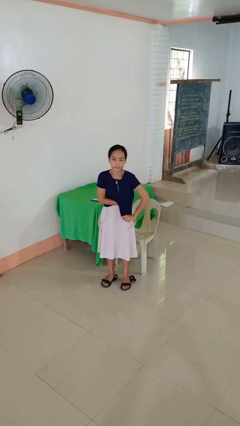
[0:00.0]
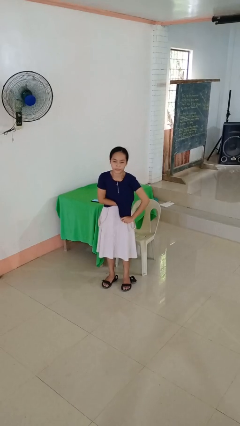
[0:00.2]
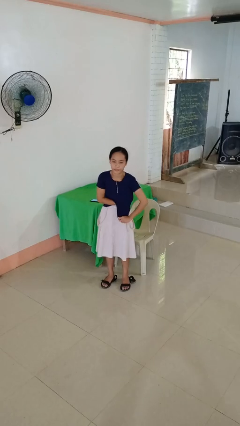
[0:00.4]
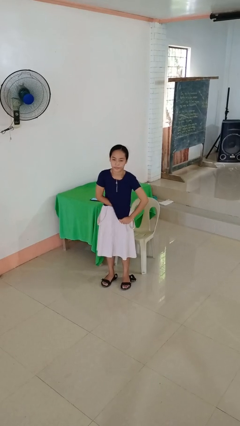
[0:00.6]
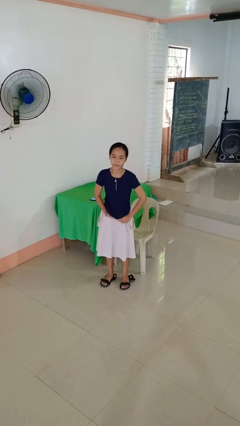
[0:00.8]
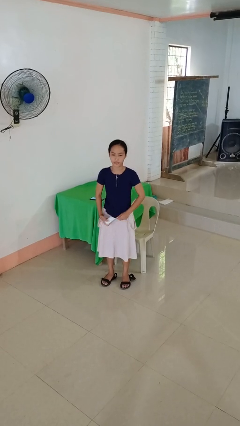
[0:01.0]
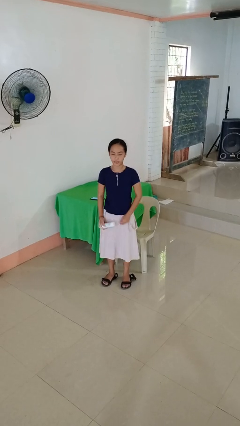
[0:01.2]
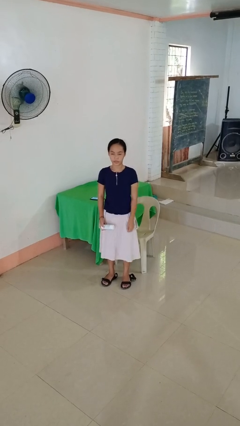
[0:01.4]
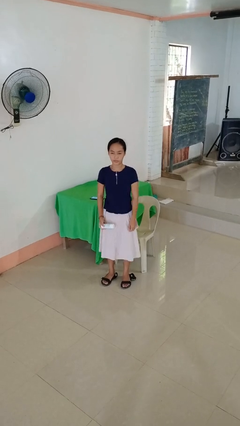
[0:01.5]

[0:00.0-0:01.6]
person applies deodorant

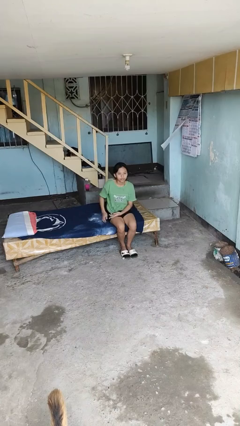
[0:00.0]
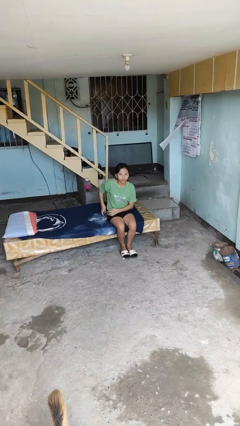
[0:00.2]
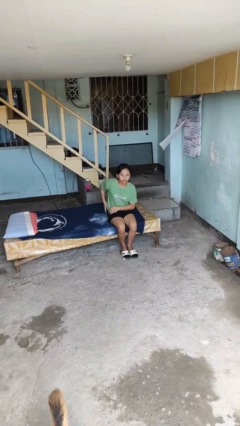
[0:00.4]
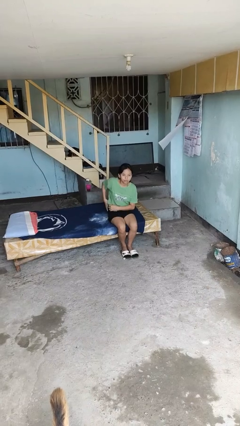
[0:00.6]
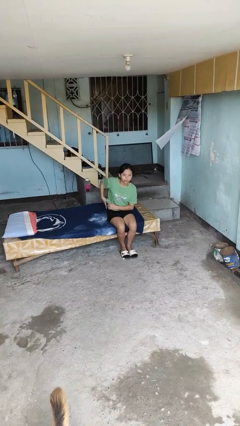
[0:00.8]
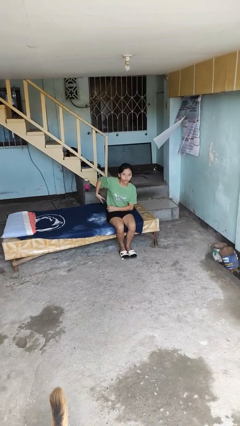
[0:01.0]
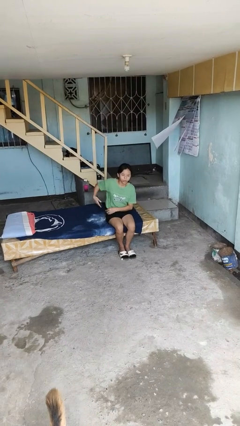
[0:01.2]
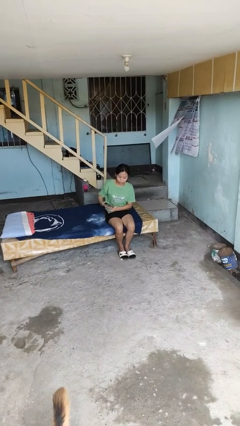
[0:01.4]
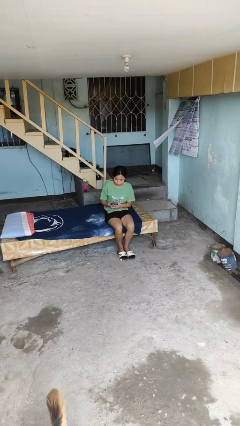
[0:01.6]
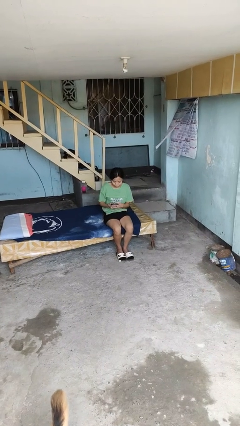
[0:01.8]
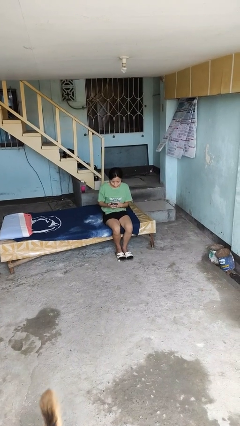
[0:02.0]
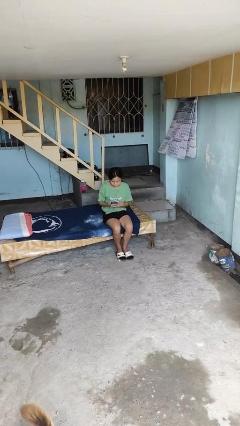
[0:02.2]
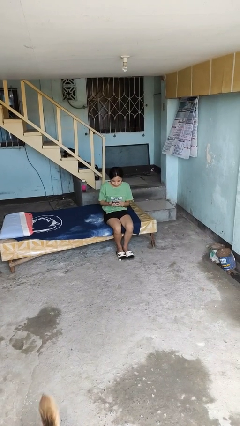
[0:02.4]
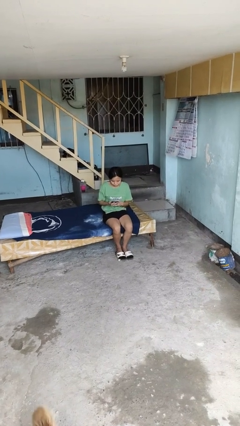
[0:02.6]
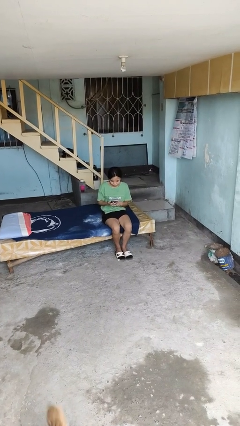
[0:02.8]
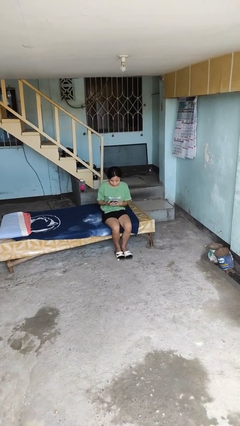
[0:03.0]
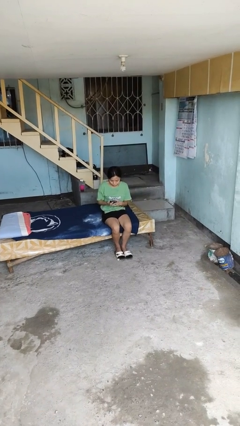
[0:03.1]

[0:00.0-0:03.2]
person takes phone from pocket

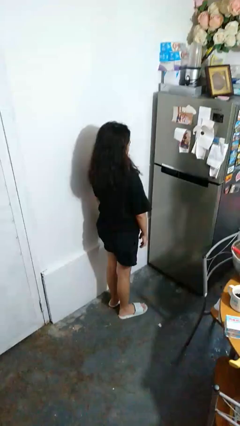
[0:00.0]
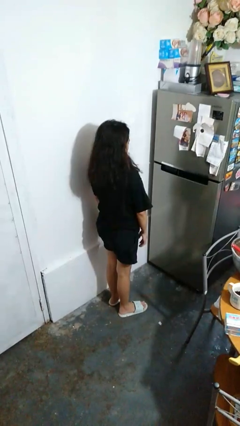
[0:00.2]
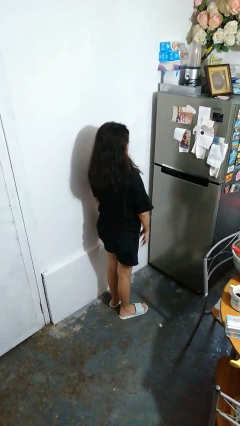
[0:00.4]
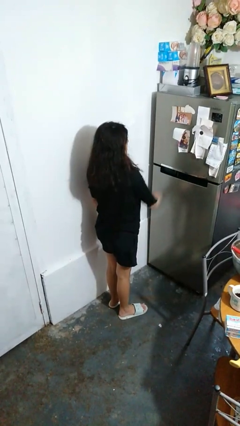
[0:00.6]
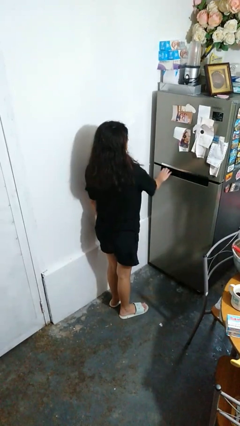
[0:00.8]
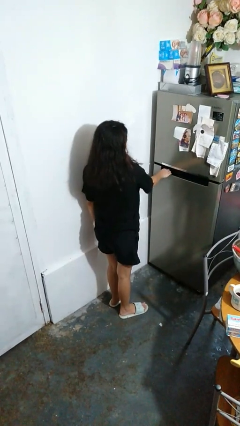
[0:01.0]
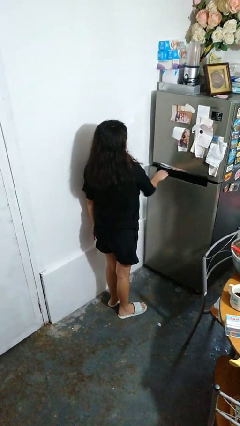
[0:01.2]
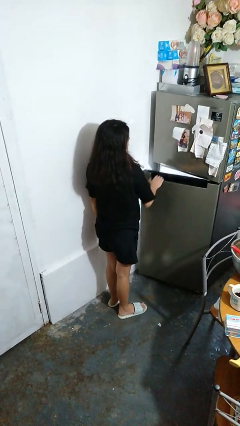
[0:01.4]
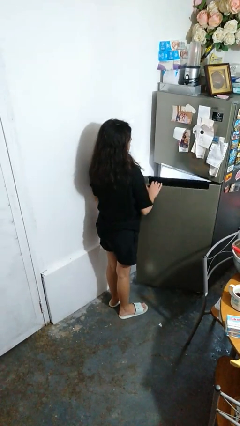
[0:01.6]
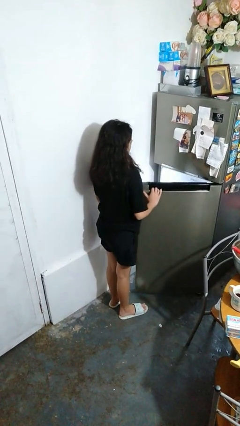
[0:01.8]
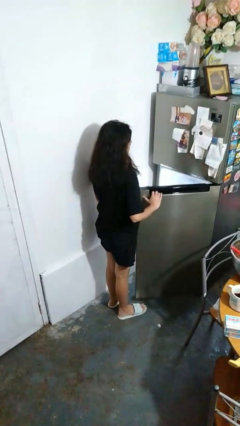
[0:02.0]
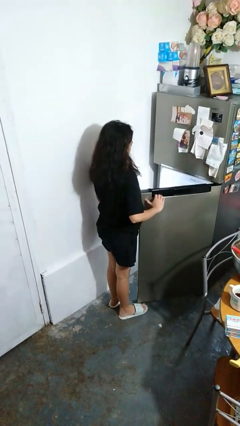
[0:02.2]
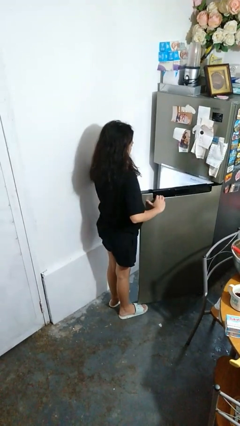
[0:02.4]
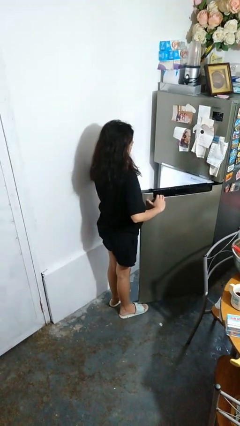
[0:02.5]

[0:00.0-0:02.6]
person opens refrigerator

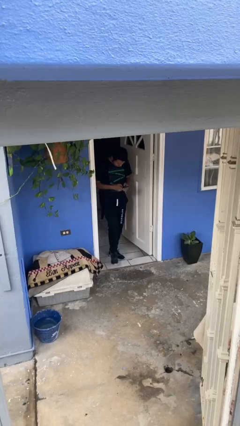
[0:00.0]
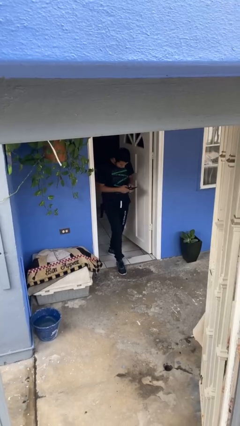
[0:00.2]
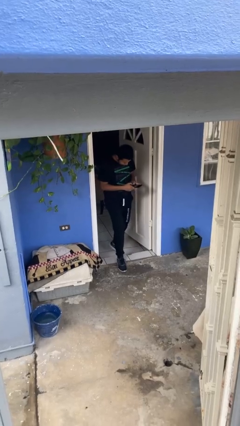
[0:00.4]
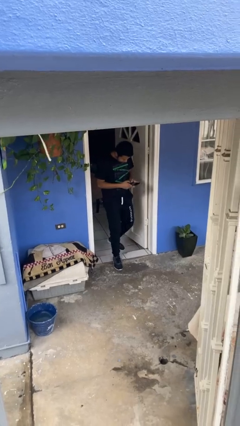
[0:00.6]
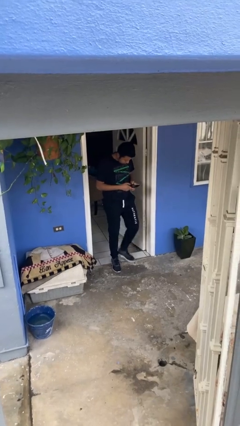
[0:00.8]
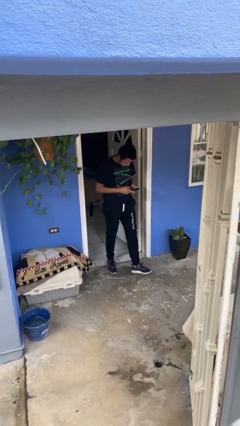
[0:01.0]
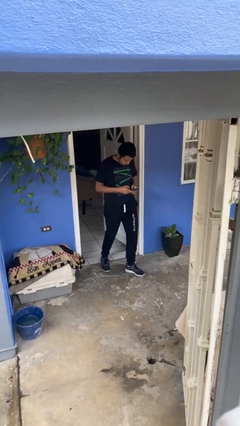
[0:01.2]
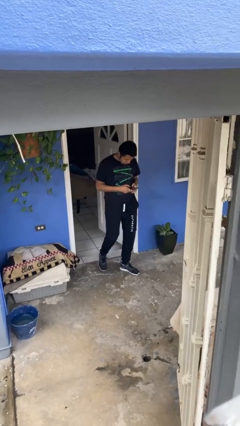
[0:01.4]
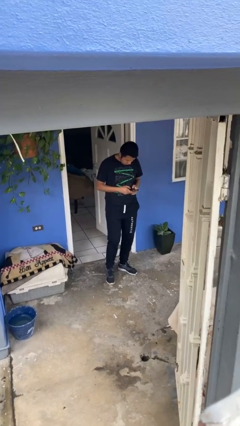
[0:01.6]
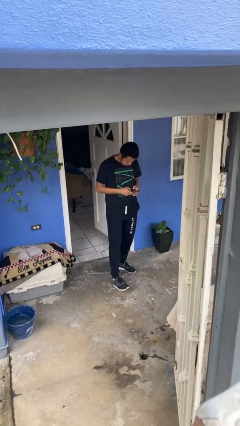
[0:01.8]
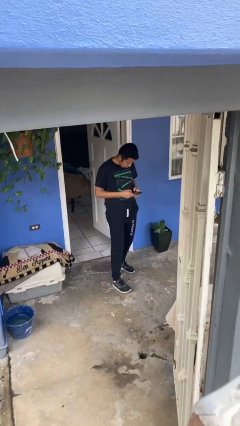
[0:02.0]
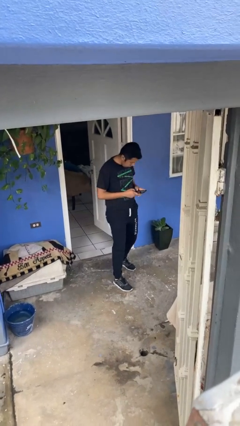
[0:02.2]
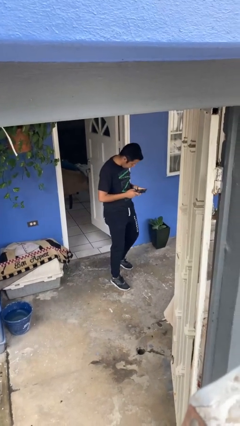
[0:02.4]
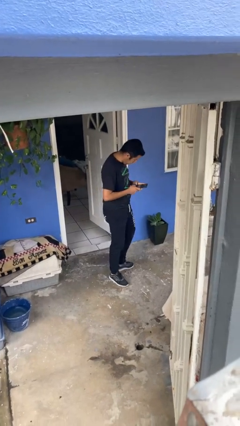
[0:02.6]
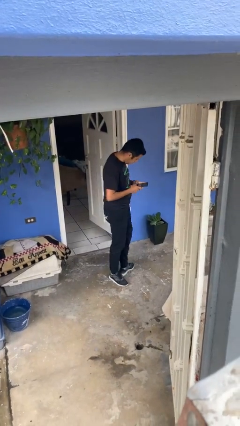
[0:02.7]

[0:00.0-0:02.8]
person enters scene through structure

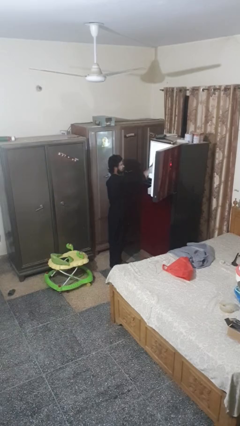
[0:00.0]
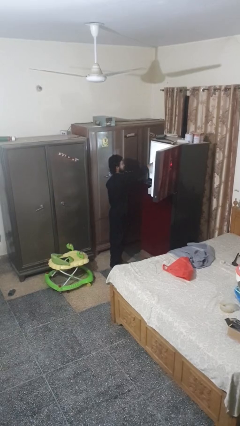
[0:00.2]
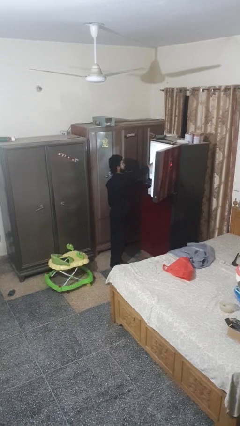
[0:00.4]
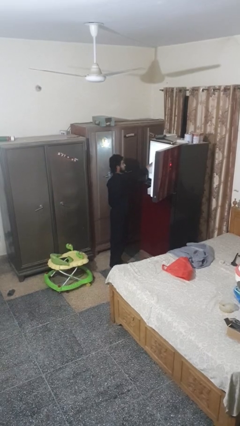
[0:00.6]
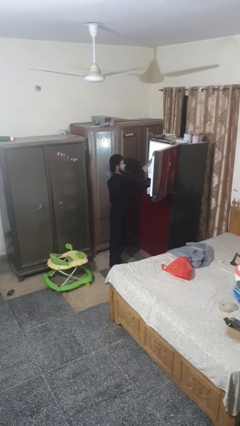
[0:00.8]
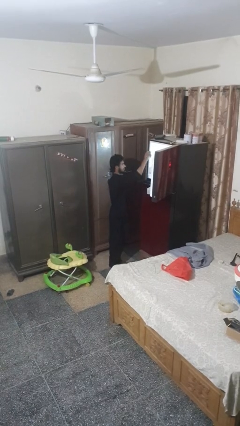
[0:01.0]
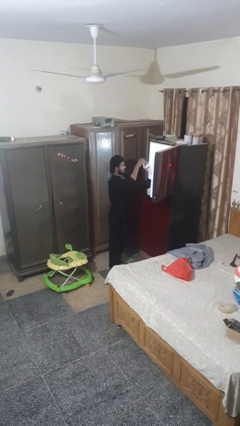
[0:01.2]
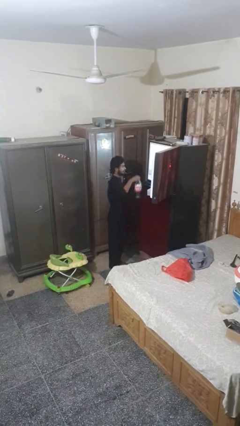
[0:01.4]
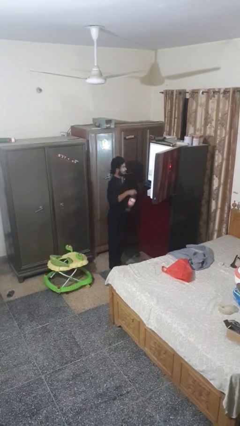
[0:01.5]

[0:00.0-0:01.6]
person takes object from refrigerator

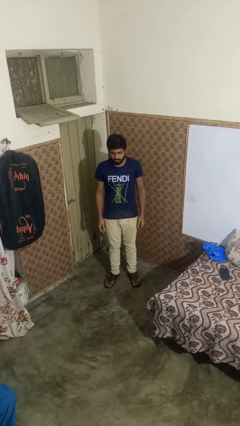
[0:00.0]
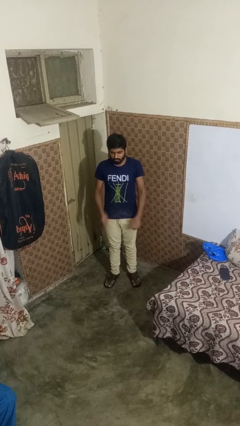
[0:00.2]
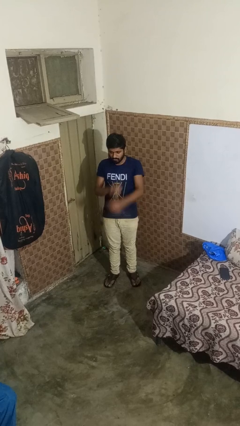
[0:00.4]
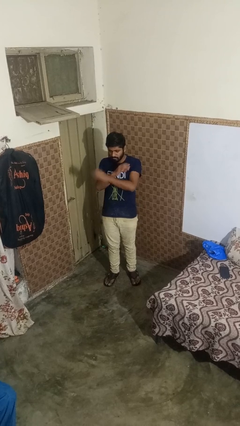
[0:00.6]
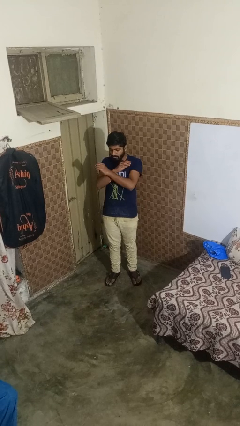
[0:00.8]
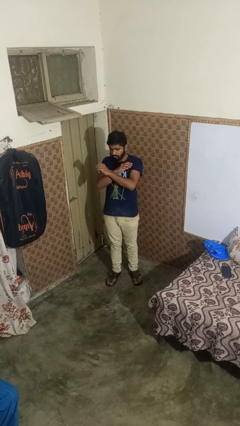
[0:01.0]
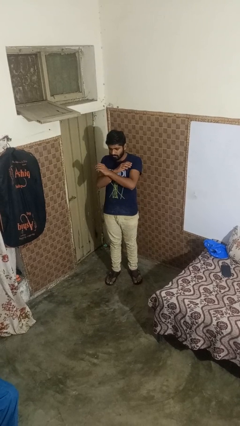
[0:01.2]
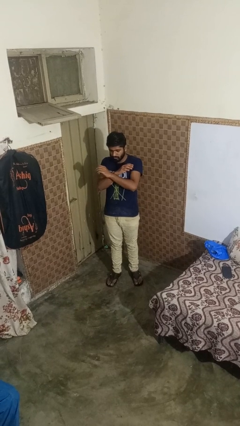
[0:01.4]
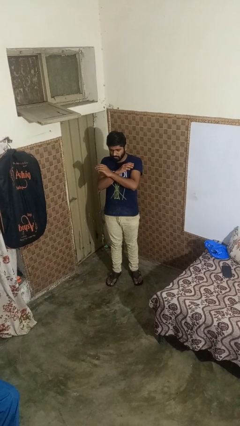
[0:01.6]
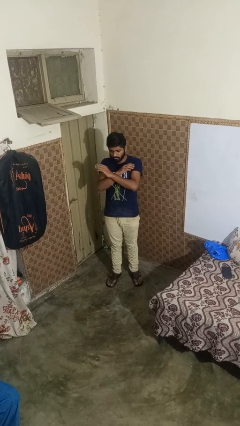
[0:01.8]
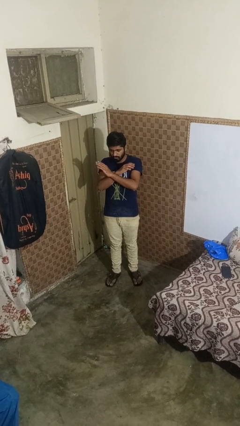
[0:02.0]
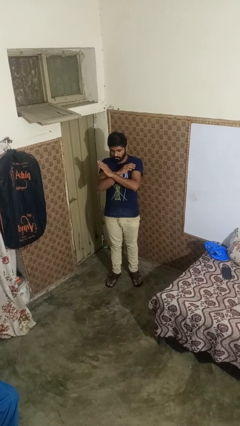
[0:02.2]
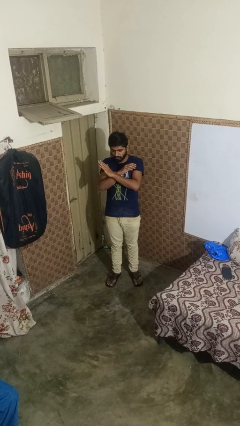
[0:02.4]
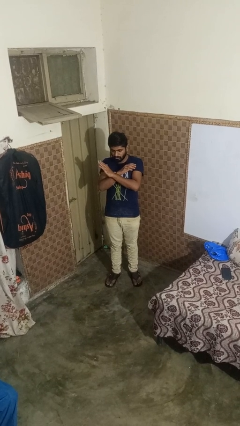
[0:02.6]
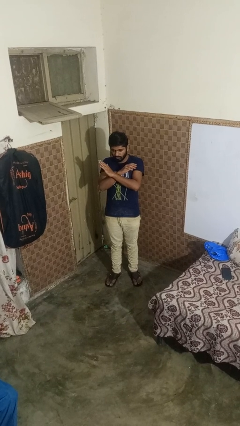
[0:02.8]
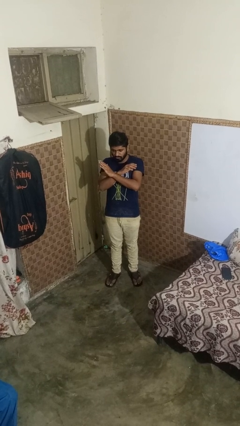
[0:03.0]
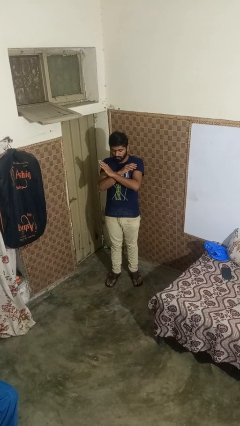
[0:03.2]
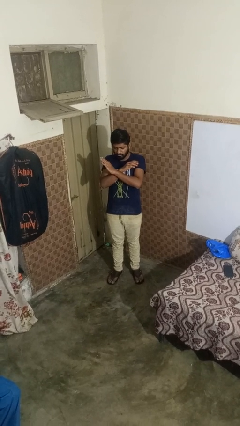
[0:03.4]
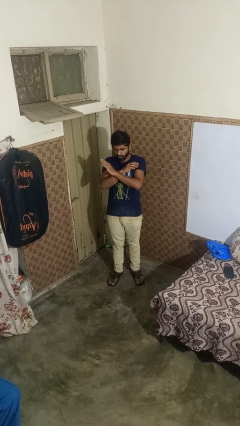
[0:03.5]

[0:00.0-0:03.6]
person gestures arms x

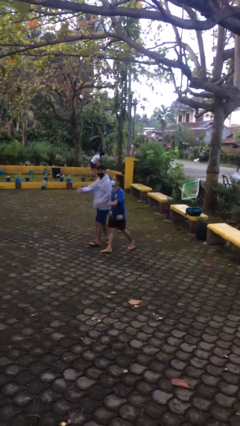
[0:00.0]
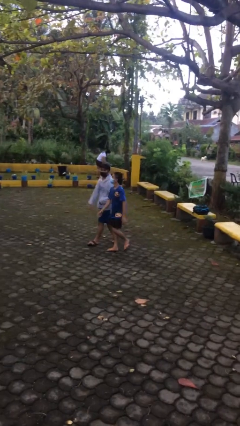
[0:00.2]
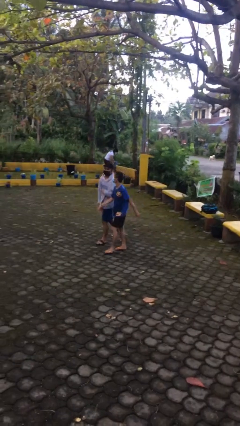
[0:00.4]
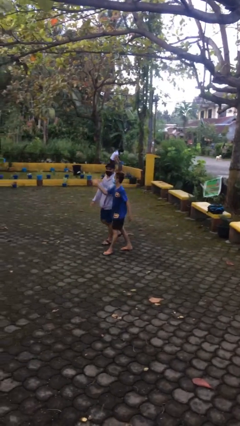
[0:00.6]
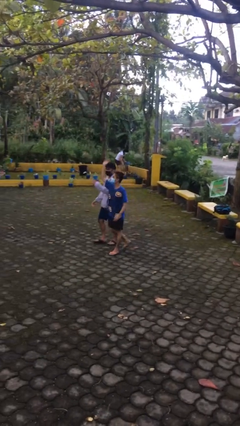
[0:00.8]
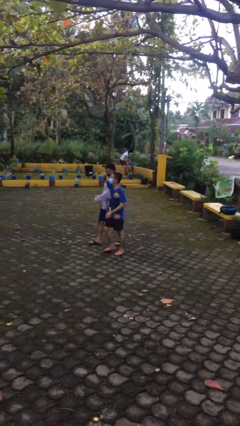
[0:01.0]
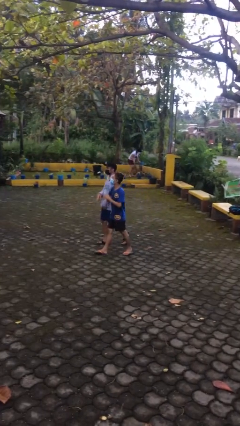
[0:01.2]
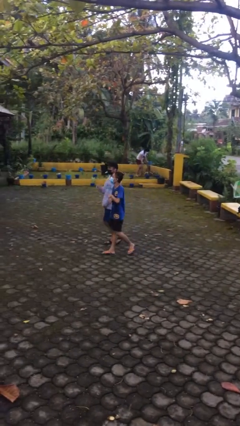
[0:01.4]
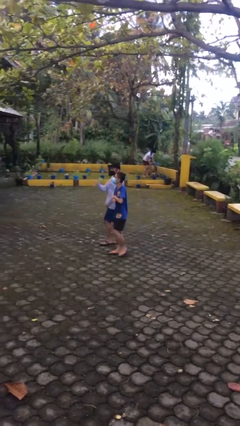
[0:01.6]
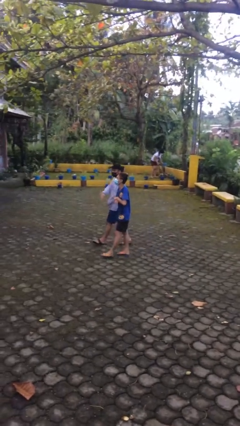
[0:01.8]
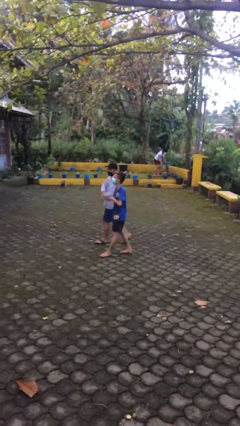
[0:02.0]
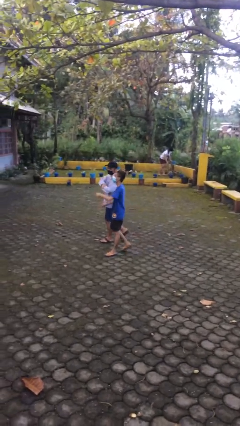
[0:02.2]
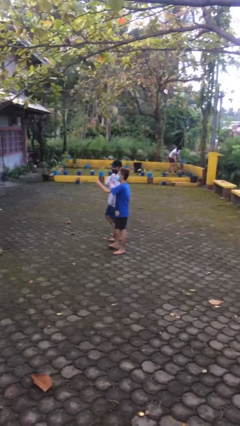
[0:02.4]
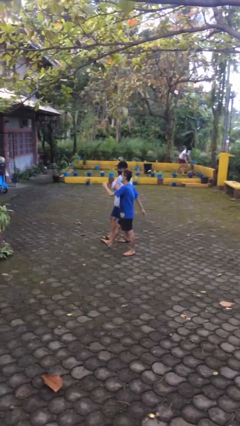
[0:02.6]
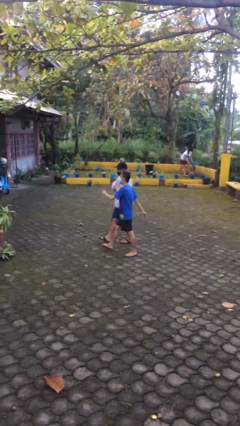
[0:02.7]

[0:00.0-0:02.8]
person talks to person
